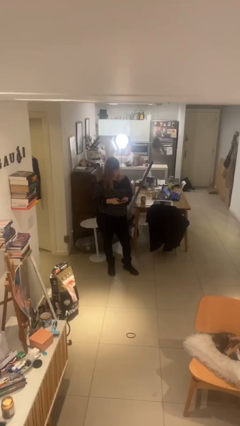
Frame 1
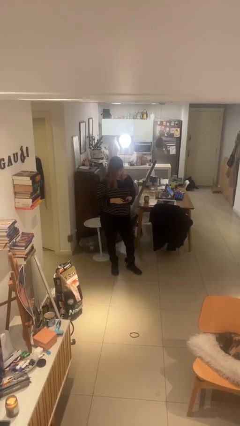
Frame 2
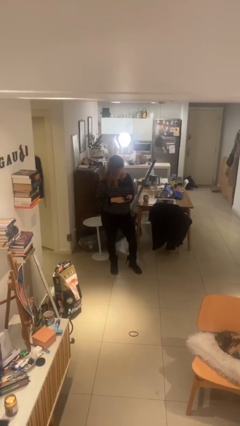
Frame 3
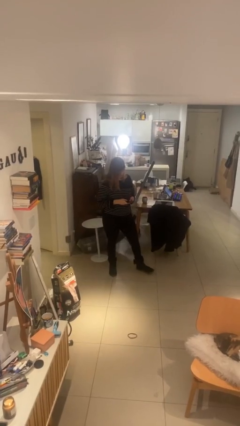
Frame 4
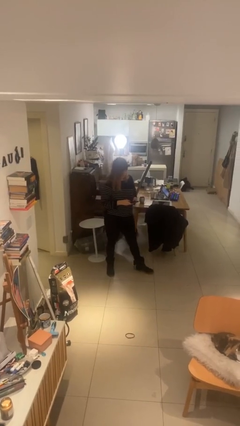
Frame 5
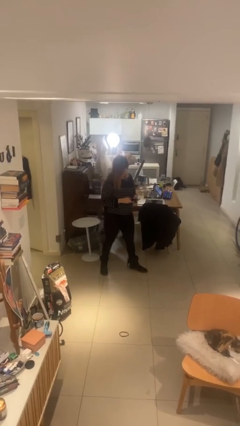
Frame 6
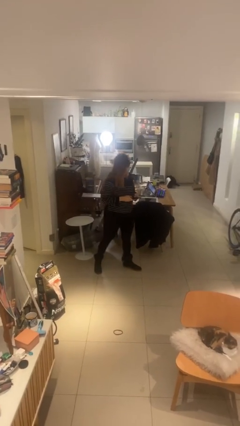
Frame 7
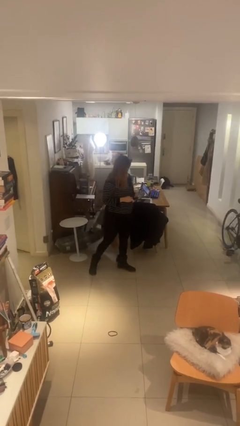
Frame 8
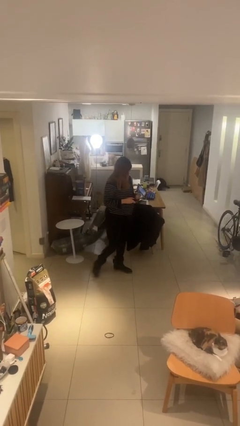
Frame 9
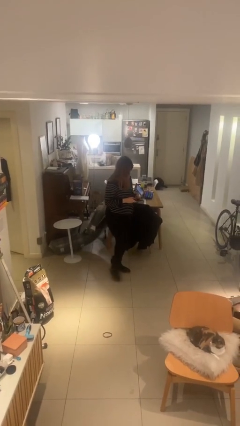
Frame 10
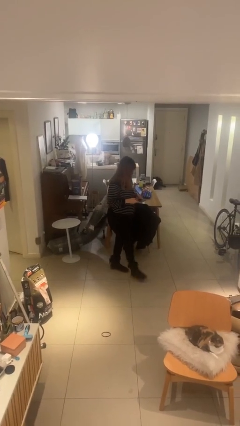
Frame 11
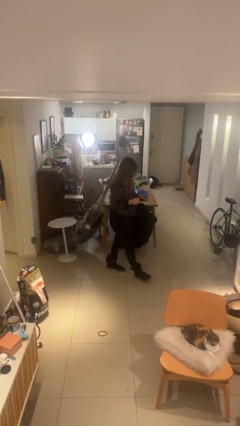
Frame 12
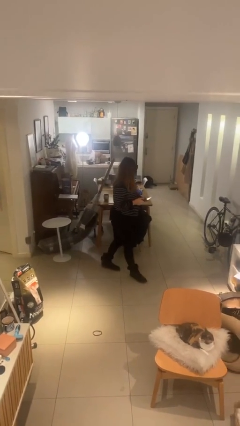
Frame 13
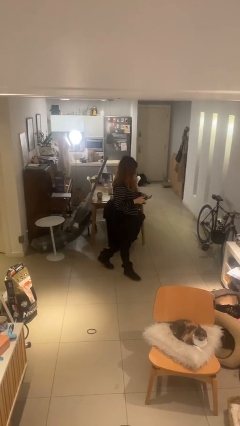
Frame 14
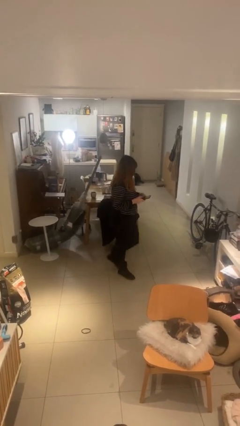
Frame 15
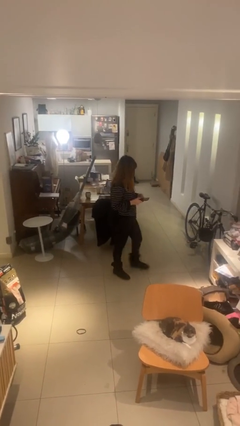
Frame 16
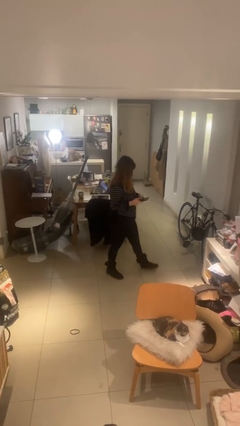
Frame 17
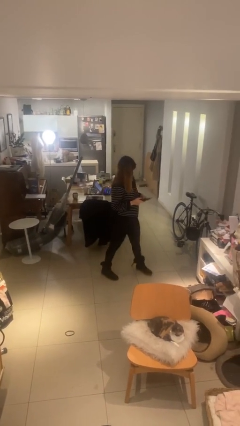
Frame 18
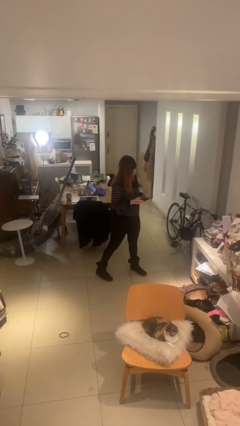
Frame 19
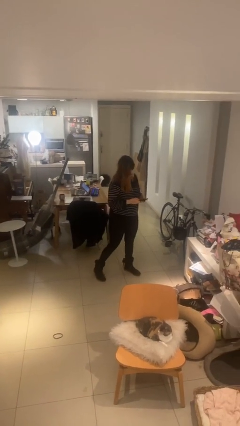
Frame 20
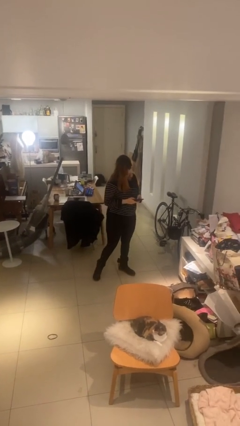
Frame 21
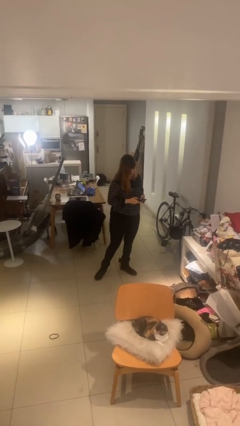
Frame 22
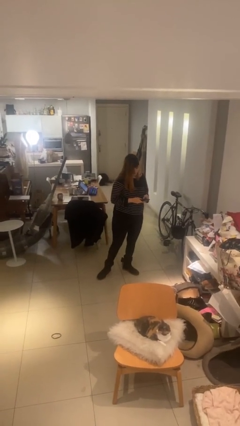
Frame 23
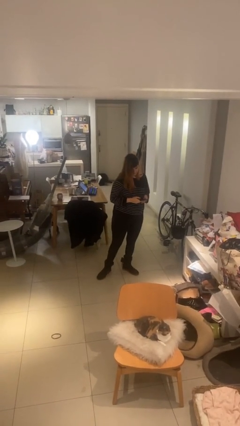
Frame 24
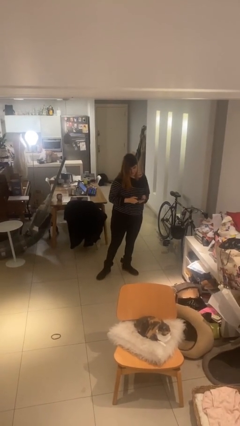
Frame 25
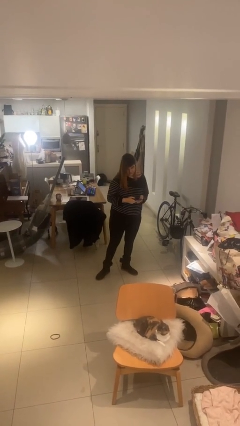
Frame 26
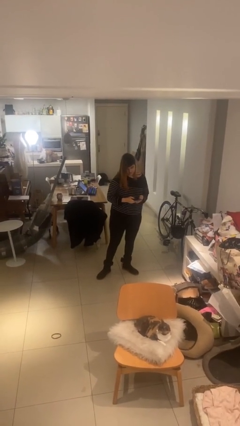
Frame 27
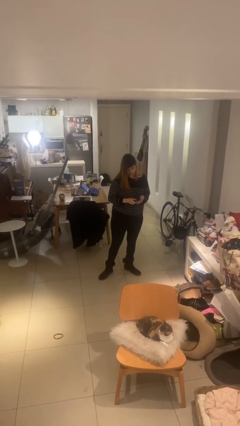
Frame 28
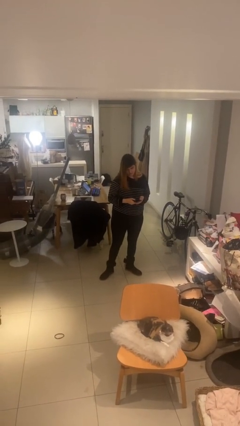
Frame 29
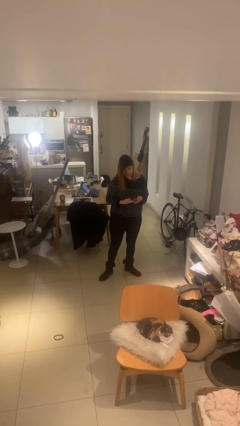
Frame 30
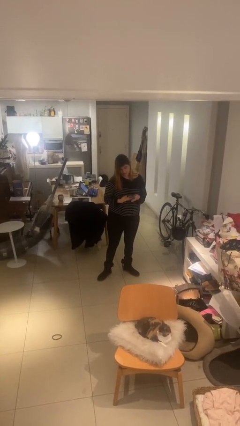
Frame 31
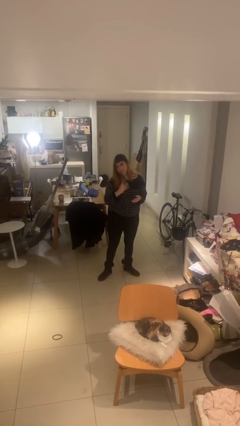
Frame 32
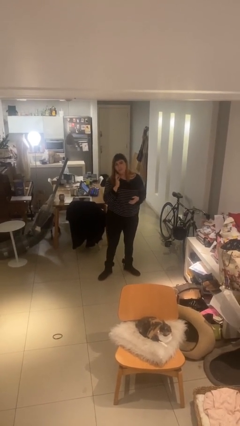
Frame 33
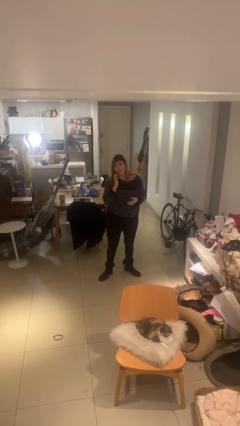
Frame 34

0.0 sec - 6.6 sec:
person texts on phone

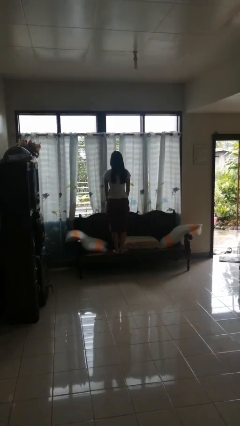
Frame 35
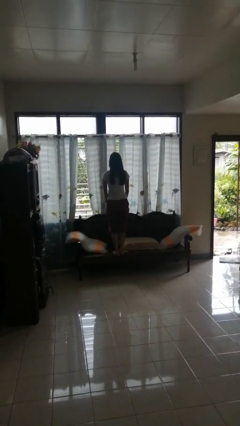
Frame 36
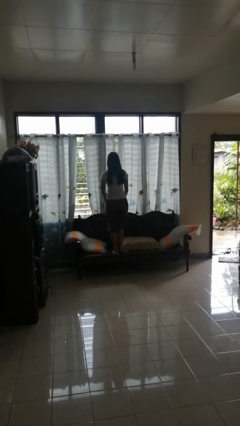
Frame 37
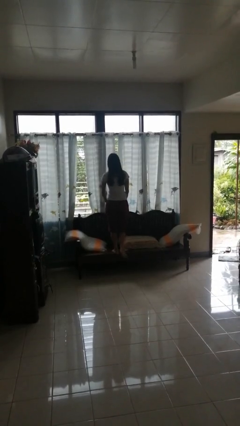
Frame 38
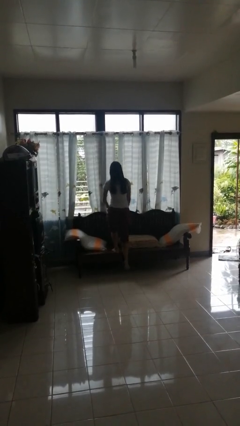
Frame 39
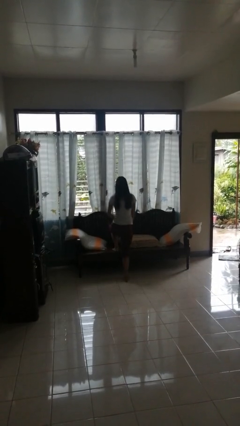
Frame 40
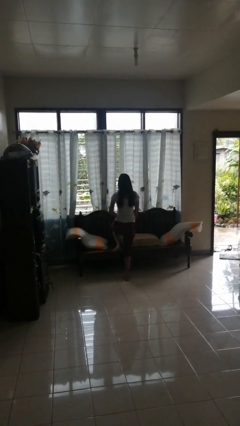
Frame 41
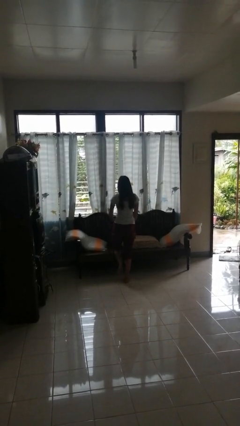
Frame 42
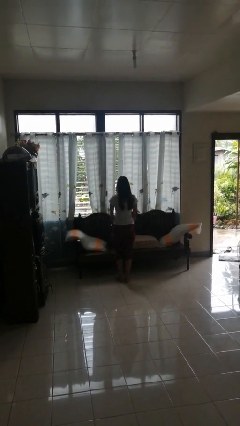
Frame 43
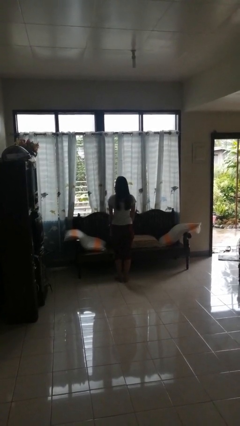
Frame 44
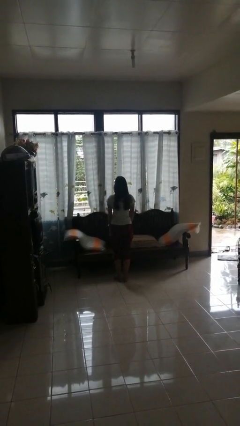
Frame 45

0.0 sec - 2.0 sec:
person climbs off couch

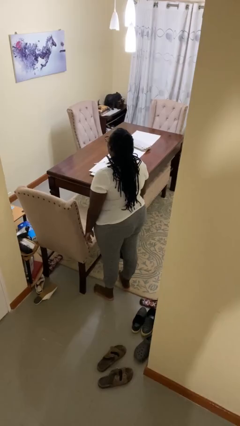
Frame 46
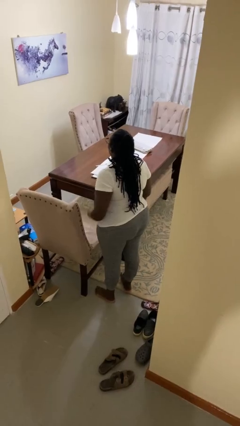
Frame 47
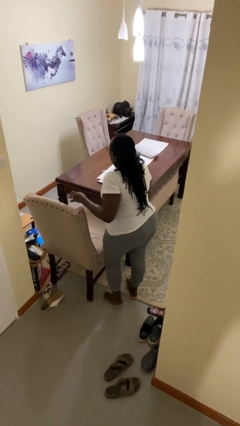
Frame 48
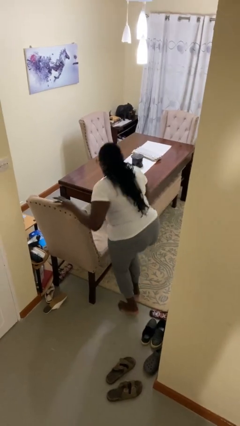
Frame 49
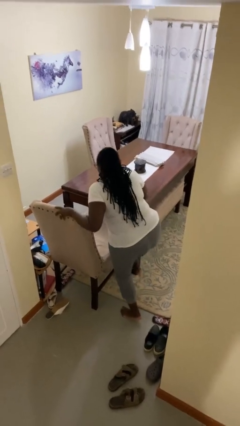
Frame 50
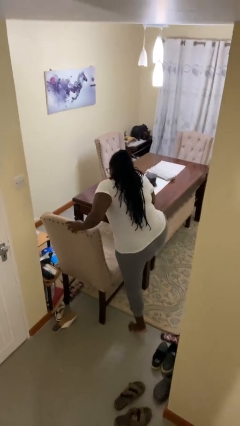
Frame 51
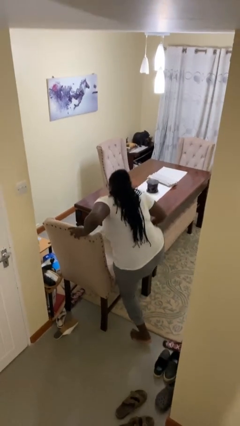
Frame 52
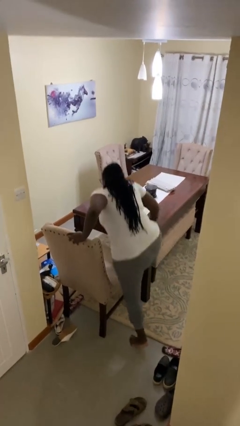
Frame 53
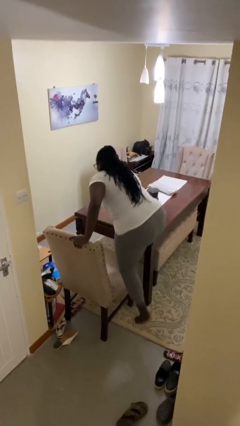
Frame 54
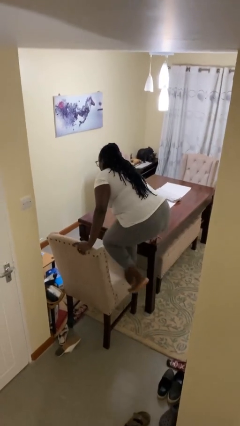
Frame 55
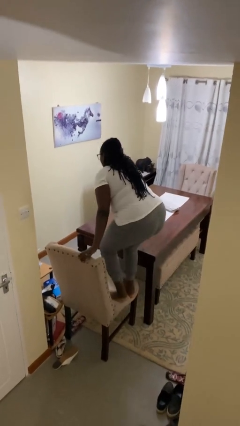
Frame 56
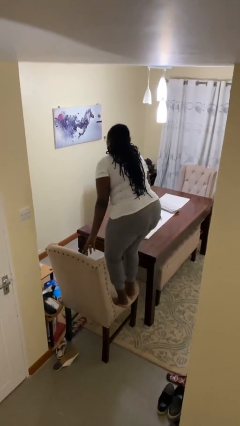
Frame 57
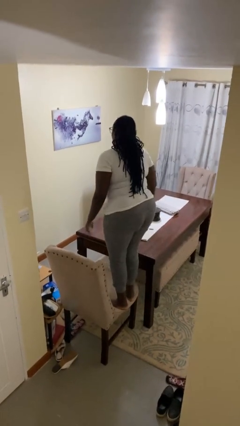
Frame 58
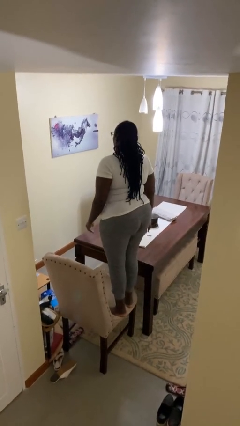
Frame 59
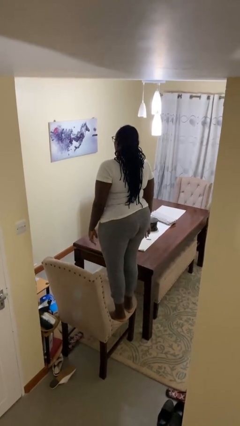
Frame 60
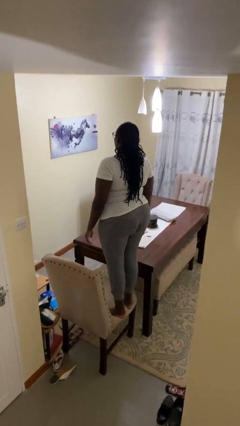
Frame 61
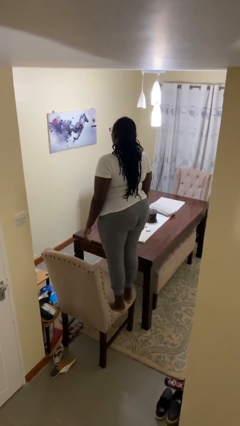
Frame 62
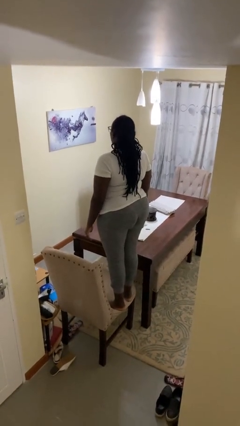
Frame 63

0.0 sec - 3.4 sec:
person climbs on chair

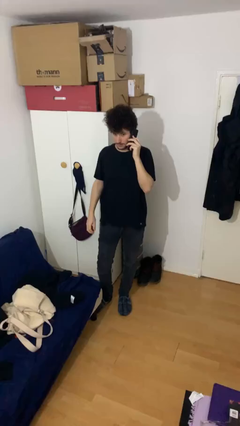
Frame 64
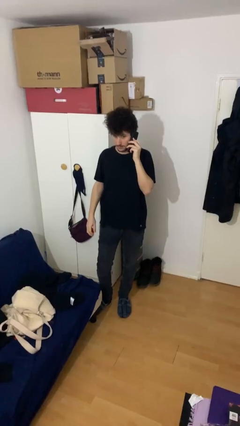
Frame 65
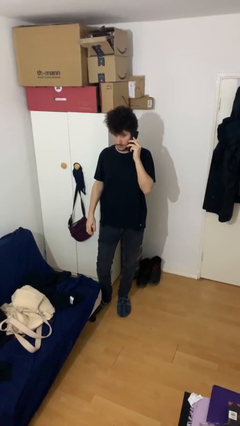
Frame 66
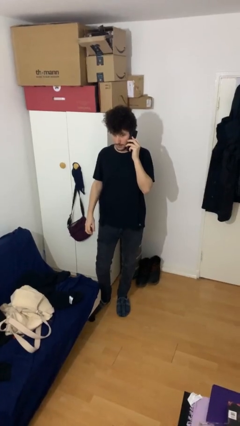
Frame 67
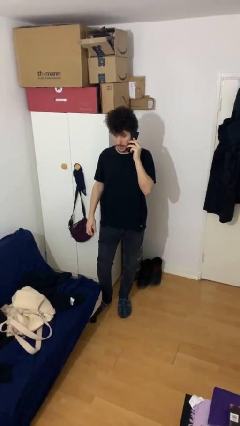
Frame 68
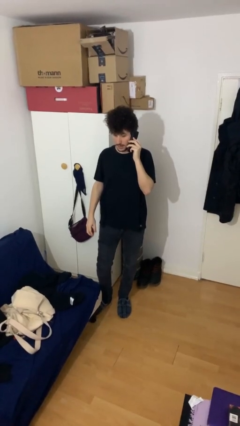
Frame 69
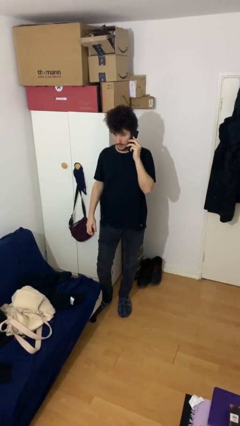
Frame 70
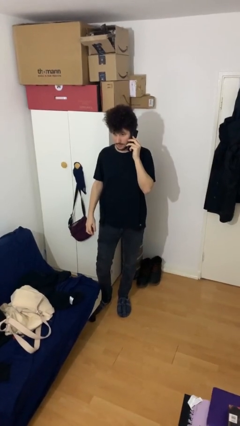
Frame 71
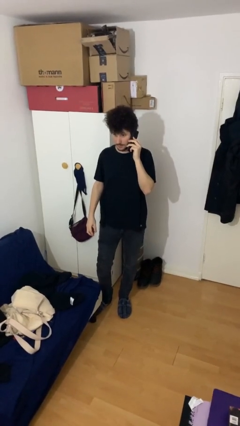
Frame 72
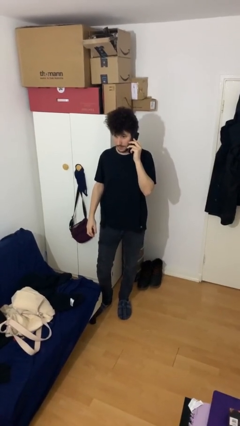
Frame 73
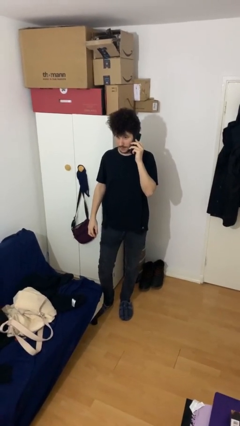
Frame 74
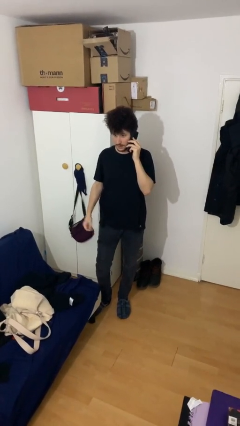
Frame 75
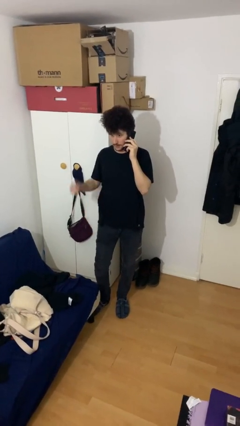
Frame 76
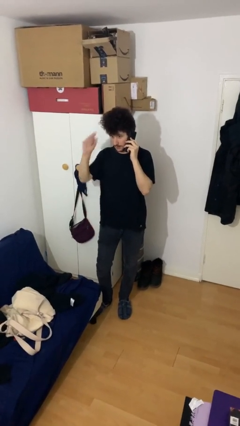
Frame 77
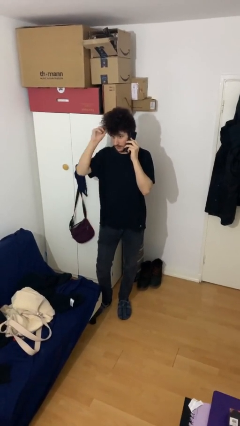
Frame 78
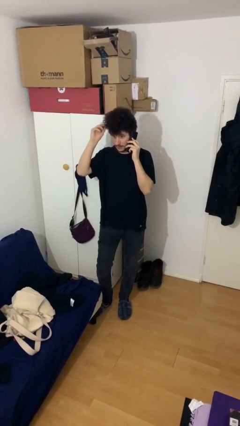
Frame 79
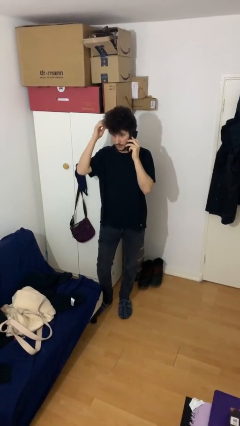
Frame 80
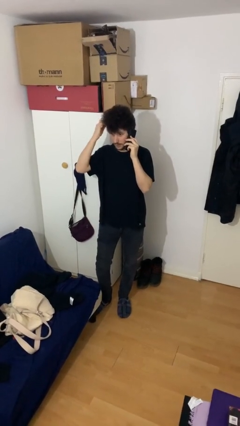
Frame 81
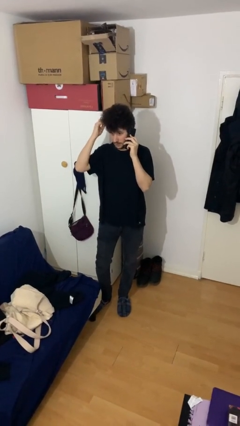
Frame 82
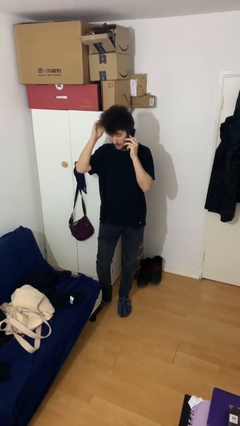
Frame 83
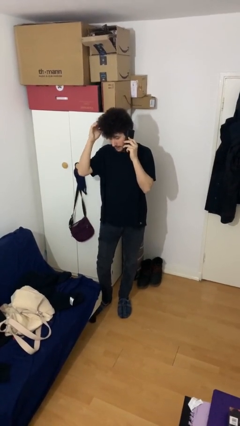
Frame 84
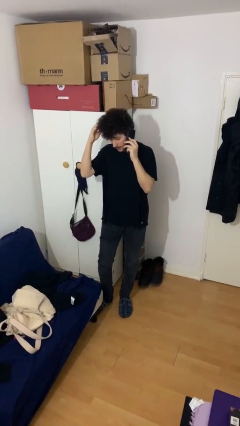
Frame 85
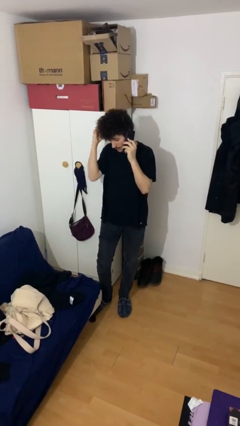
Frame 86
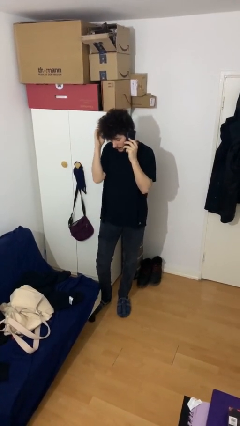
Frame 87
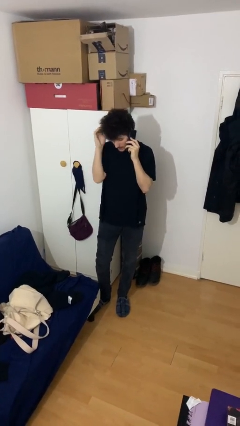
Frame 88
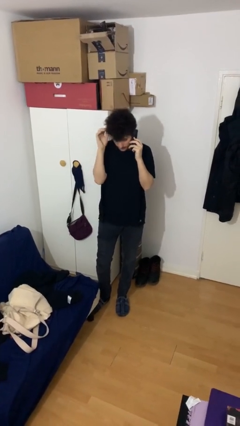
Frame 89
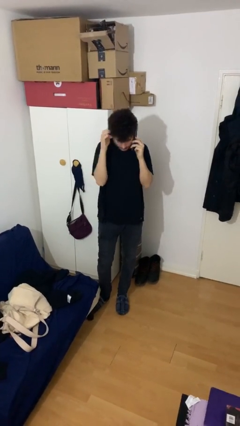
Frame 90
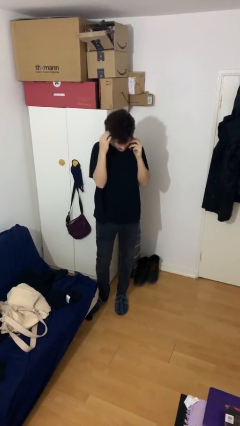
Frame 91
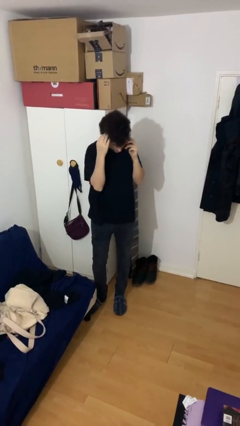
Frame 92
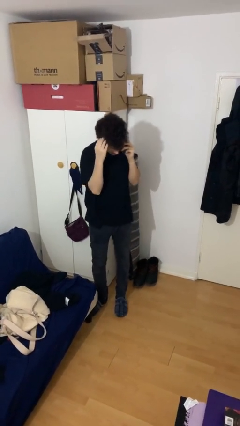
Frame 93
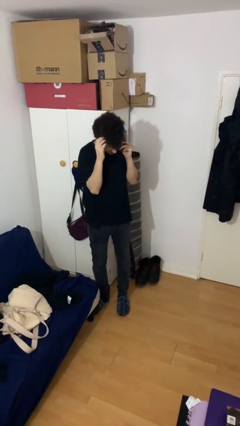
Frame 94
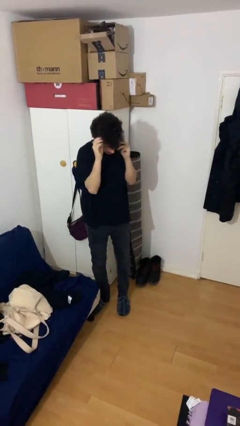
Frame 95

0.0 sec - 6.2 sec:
person talks on phone
